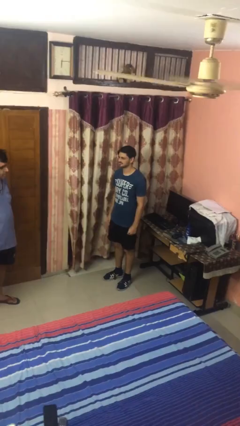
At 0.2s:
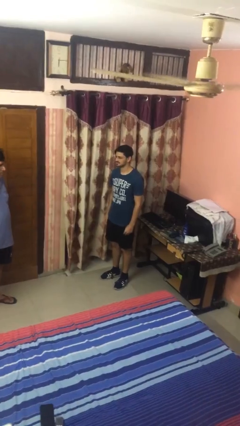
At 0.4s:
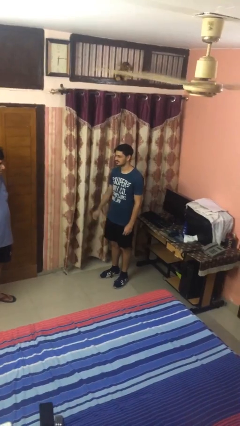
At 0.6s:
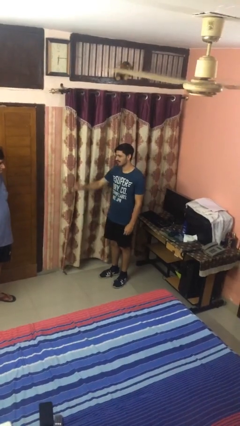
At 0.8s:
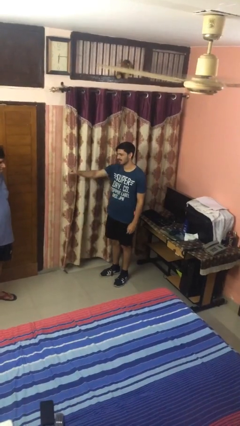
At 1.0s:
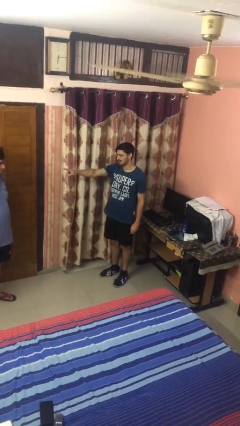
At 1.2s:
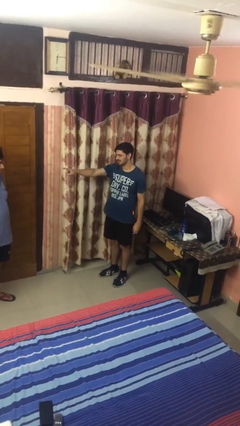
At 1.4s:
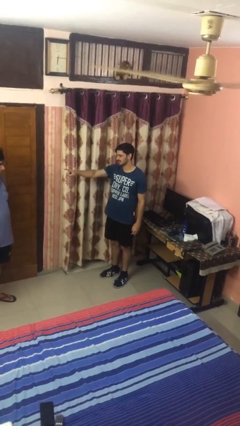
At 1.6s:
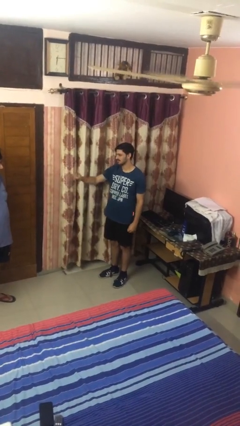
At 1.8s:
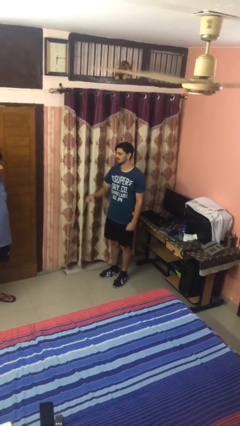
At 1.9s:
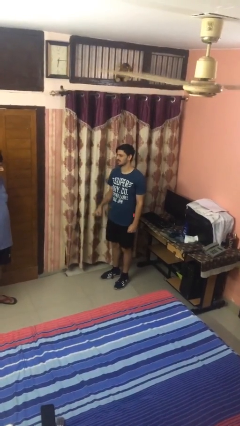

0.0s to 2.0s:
person points at person

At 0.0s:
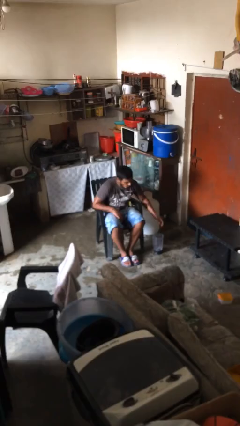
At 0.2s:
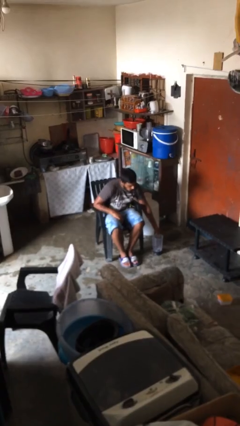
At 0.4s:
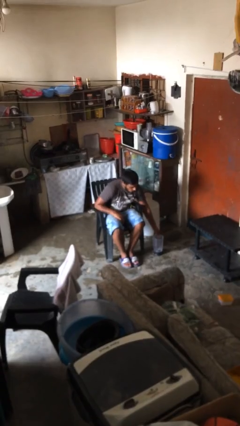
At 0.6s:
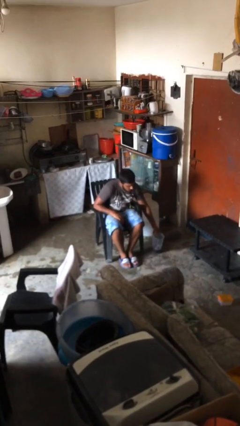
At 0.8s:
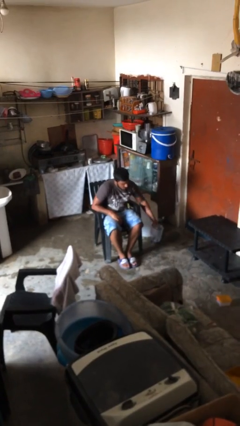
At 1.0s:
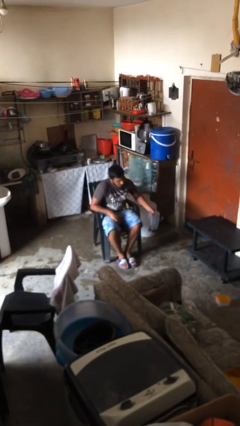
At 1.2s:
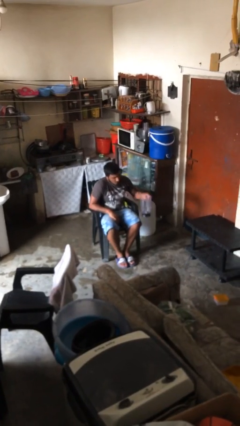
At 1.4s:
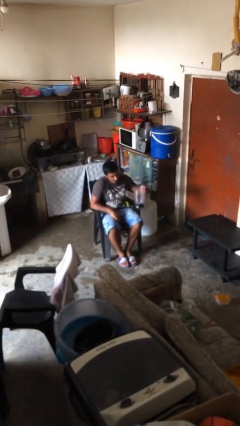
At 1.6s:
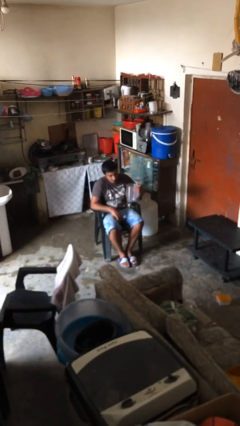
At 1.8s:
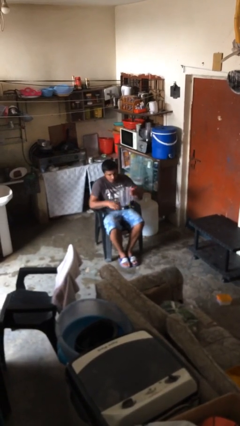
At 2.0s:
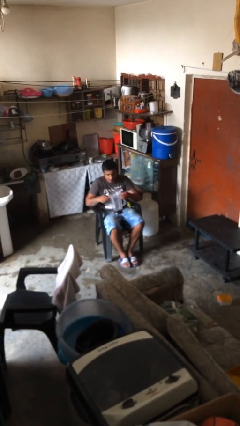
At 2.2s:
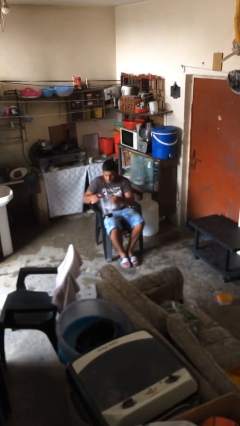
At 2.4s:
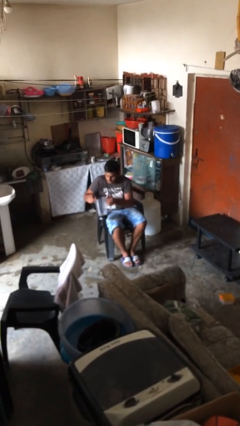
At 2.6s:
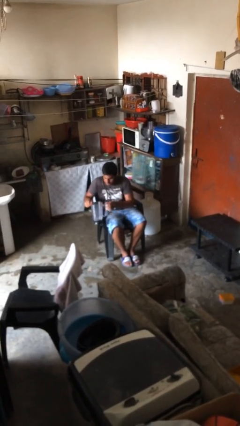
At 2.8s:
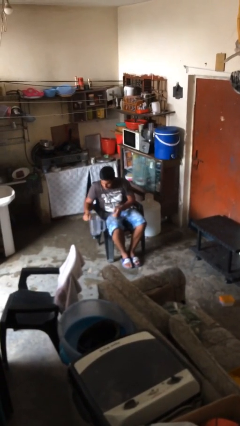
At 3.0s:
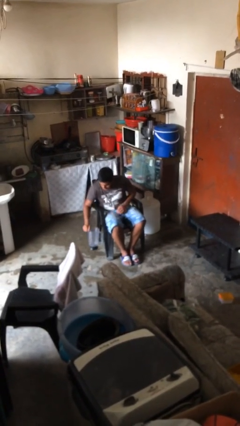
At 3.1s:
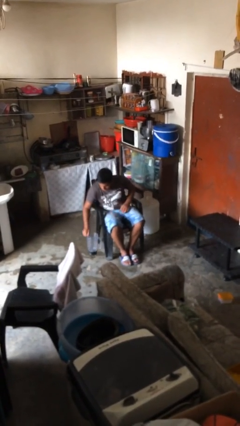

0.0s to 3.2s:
person picks up object from floor

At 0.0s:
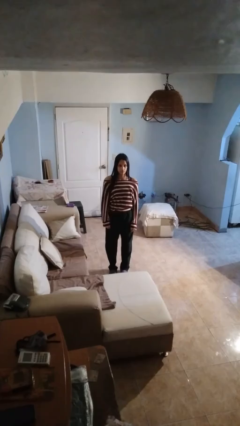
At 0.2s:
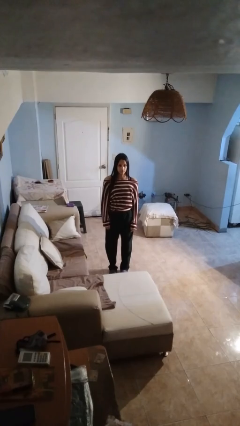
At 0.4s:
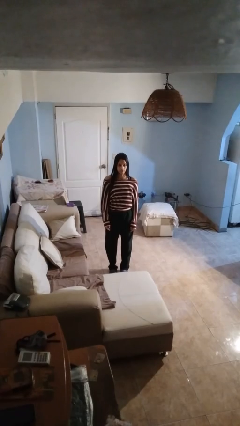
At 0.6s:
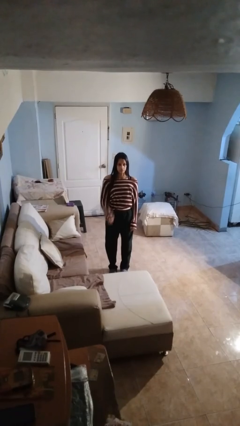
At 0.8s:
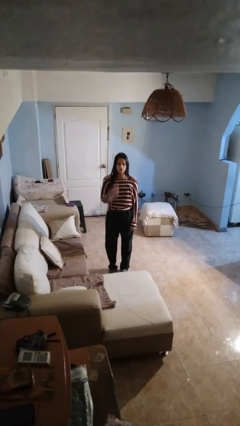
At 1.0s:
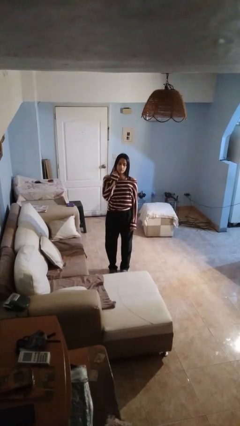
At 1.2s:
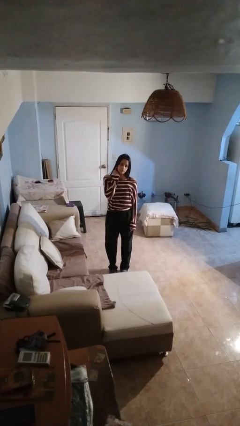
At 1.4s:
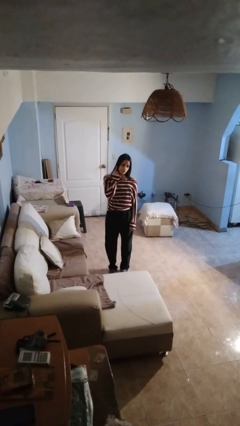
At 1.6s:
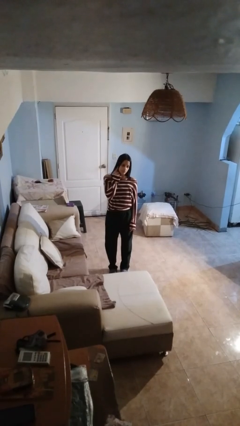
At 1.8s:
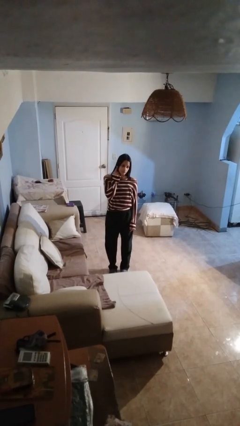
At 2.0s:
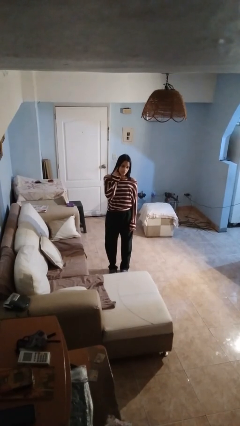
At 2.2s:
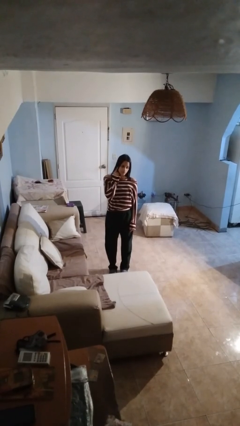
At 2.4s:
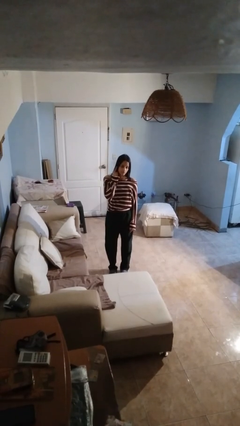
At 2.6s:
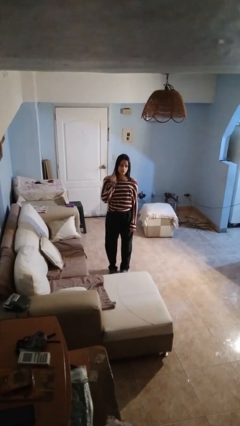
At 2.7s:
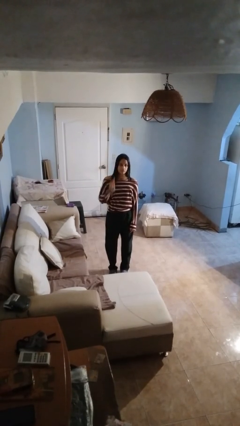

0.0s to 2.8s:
person gestures listen closely

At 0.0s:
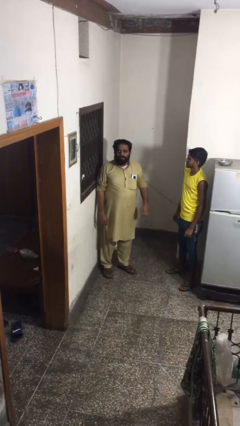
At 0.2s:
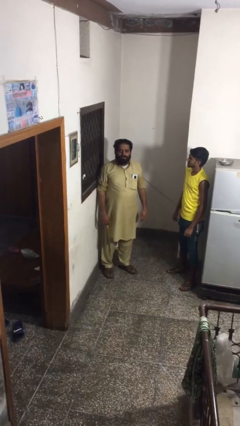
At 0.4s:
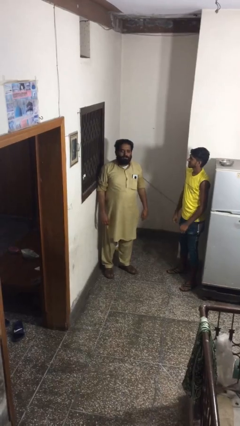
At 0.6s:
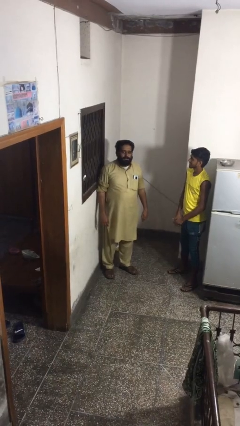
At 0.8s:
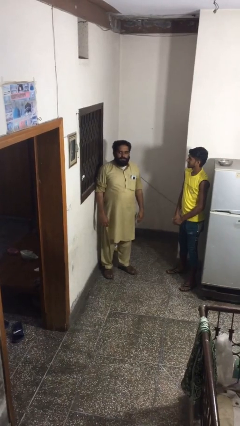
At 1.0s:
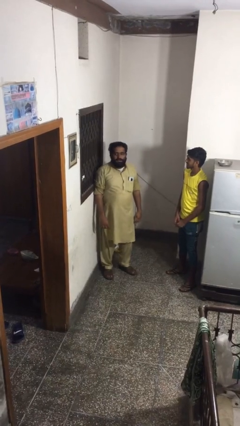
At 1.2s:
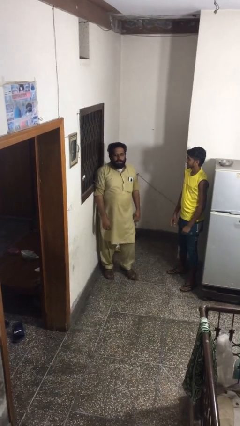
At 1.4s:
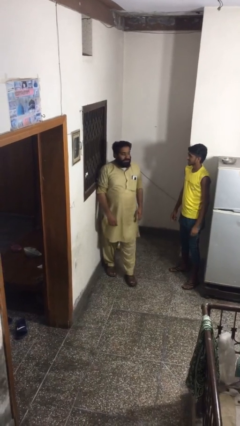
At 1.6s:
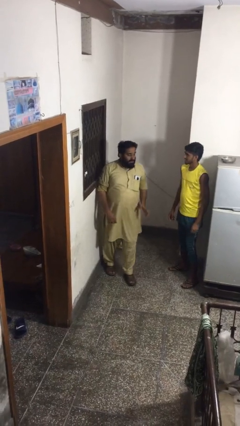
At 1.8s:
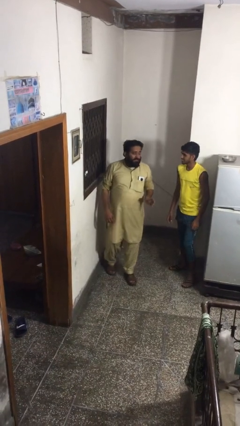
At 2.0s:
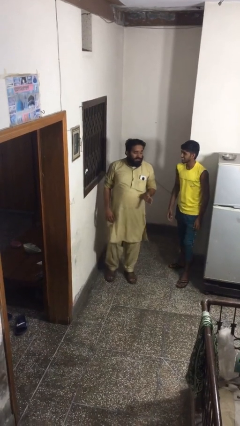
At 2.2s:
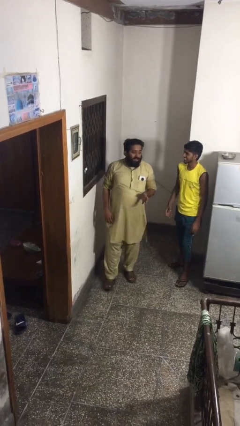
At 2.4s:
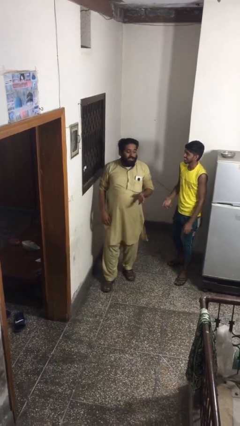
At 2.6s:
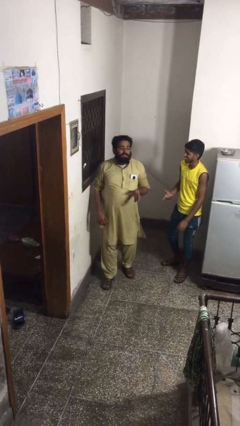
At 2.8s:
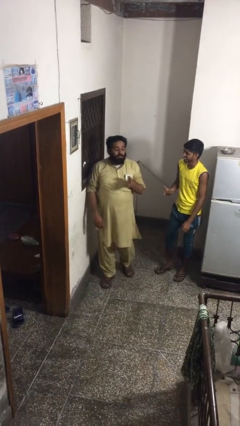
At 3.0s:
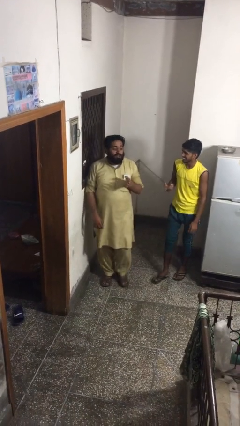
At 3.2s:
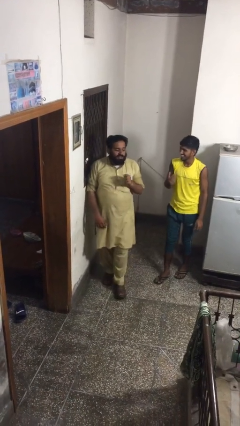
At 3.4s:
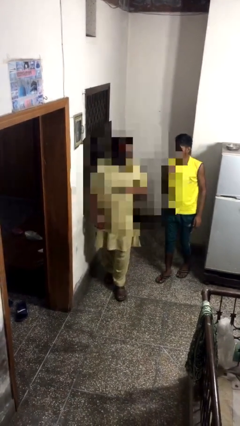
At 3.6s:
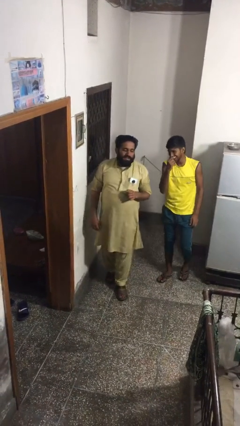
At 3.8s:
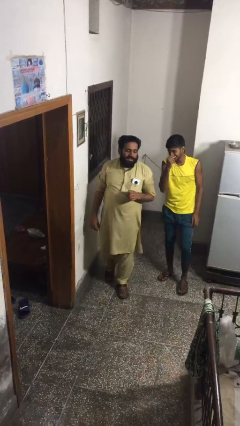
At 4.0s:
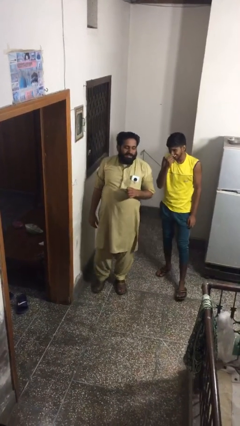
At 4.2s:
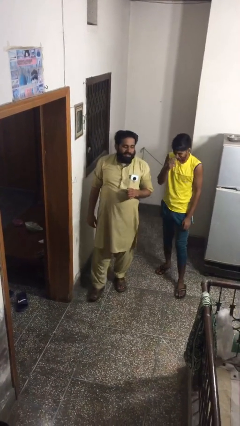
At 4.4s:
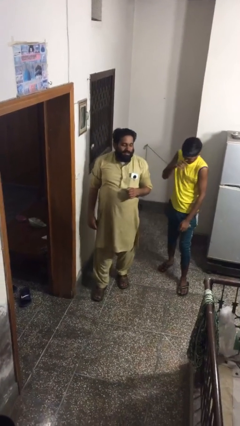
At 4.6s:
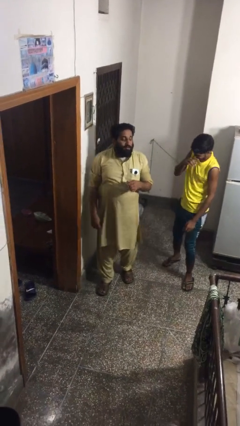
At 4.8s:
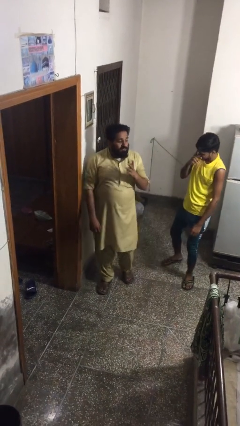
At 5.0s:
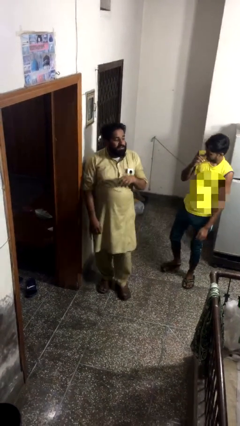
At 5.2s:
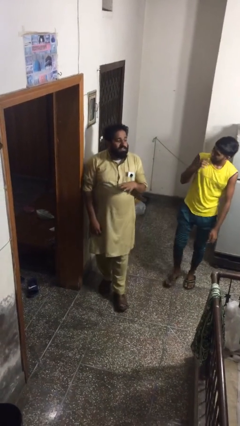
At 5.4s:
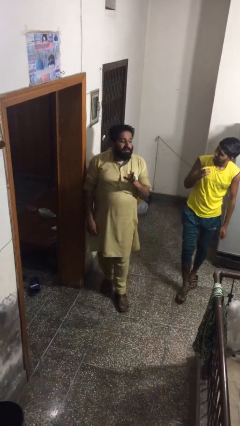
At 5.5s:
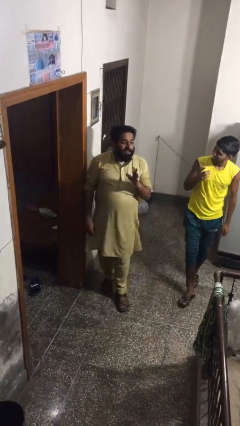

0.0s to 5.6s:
person talks to person

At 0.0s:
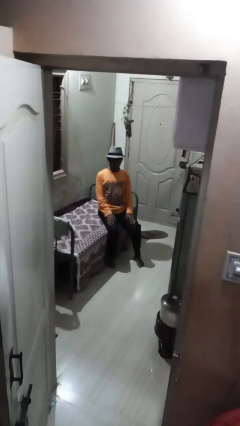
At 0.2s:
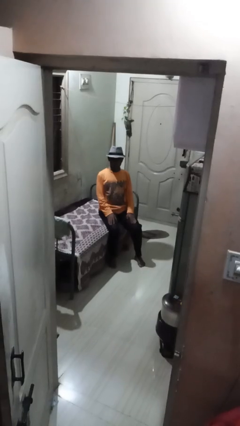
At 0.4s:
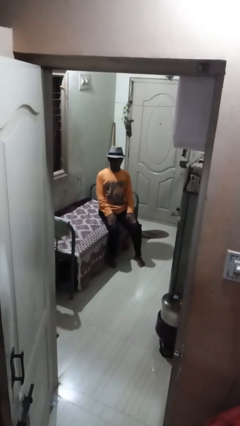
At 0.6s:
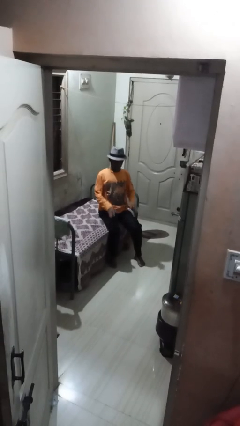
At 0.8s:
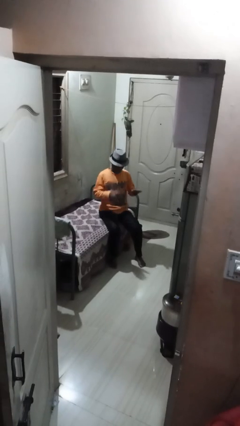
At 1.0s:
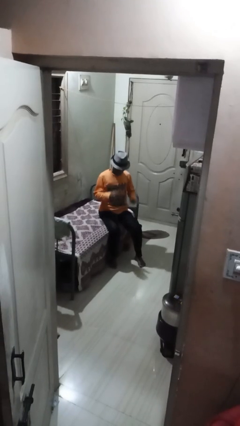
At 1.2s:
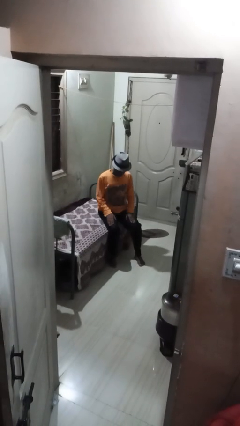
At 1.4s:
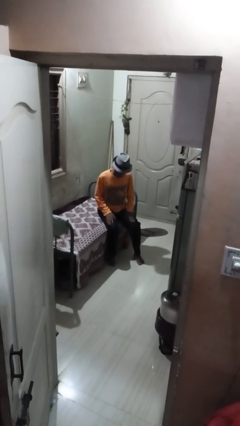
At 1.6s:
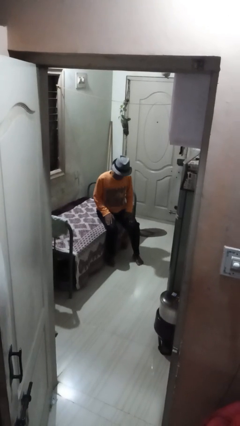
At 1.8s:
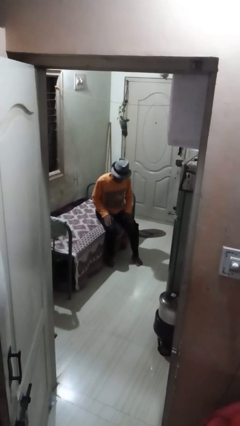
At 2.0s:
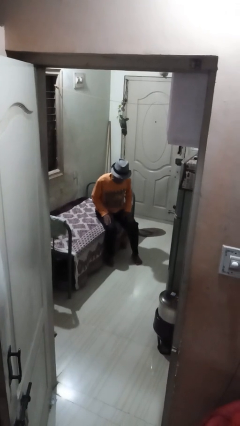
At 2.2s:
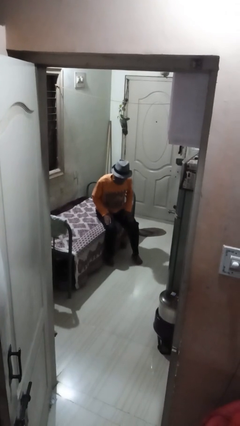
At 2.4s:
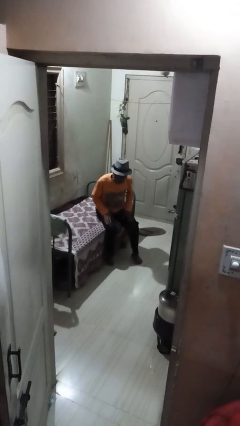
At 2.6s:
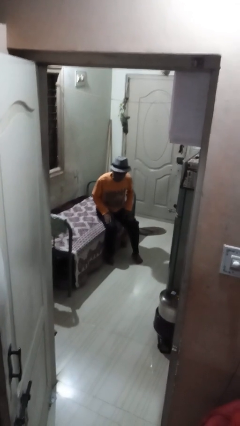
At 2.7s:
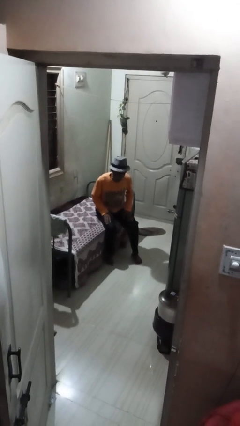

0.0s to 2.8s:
person slaps hands on thighs

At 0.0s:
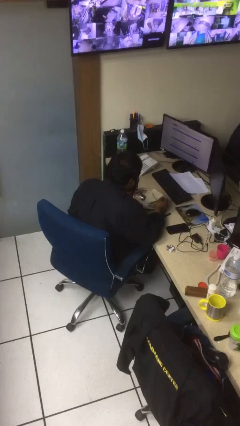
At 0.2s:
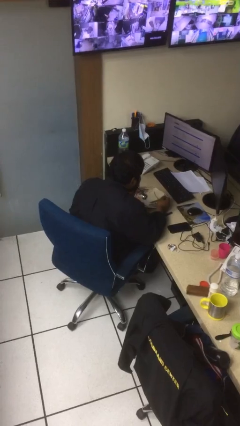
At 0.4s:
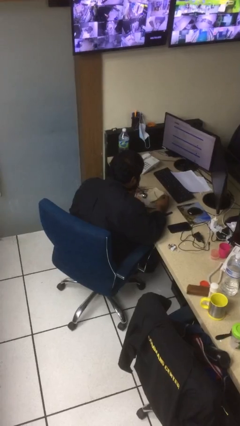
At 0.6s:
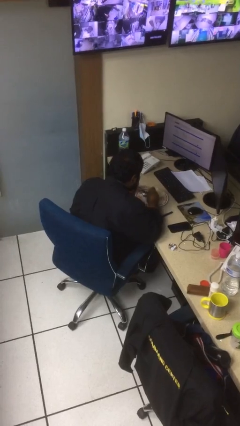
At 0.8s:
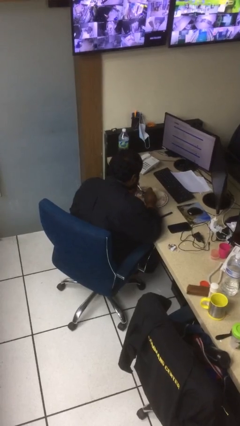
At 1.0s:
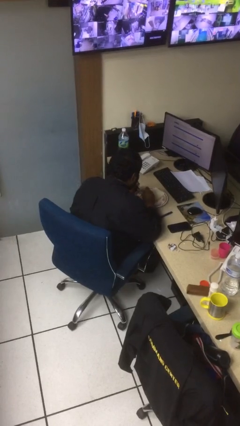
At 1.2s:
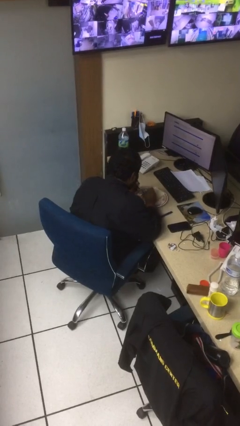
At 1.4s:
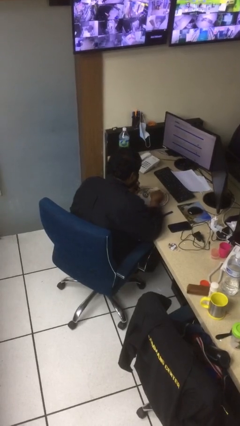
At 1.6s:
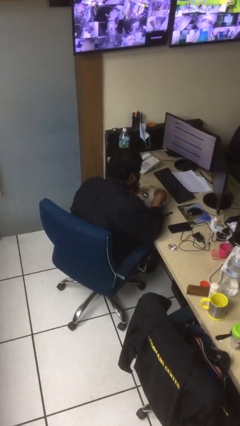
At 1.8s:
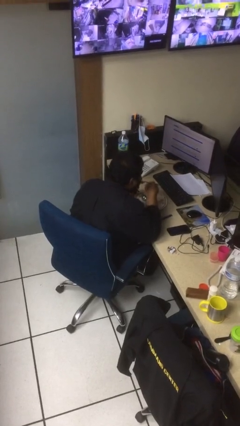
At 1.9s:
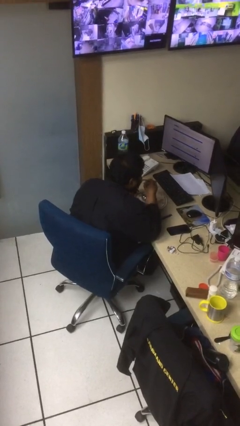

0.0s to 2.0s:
person eats with utensil
